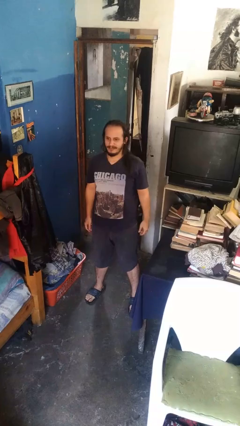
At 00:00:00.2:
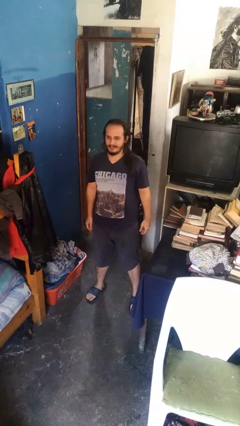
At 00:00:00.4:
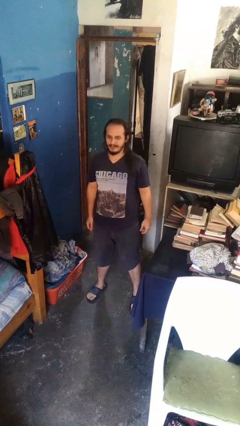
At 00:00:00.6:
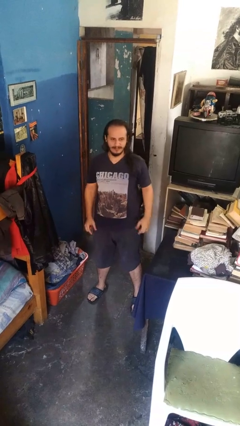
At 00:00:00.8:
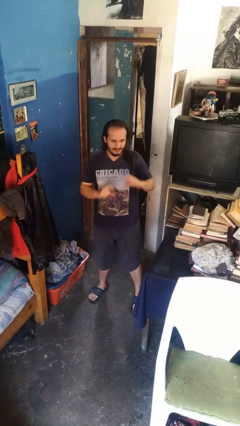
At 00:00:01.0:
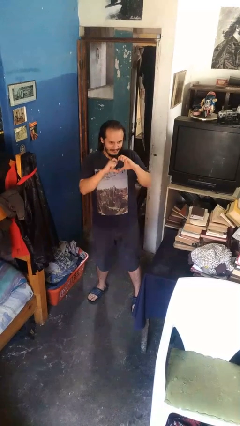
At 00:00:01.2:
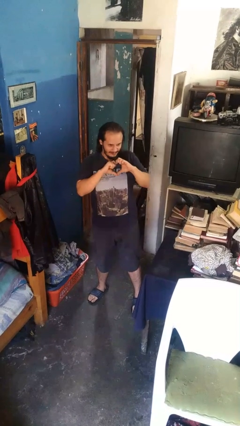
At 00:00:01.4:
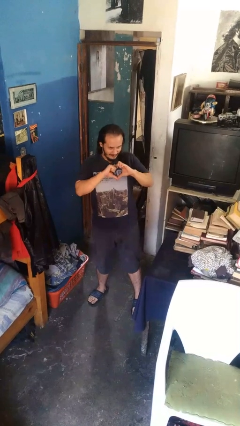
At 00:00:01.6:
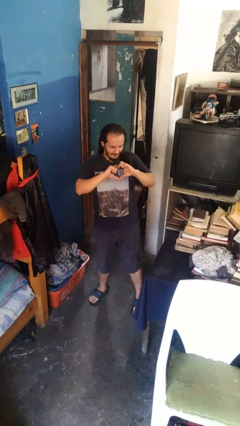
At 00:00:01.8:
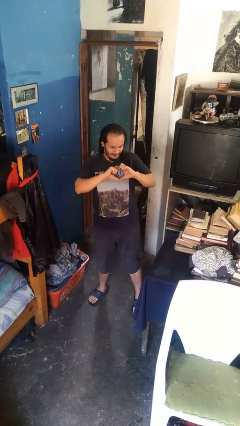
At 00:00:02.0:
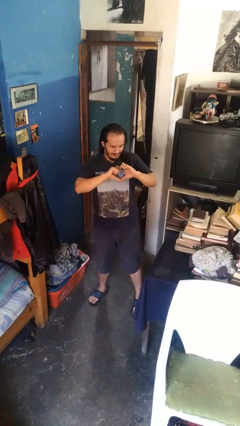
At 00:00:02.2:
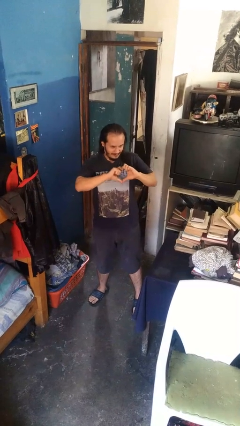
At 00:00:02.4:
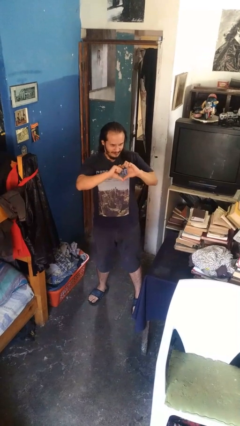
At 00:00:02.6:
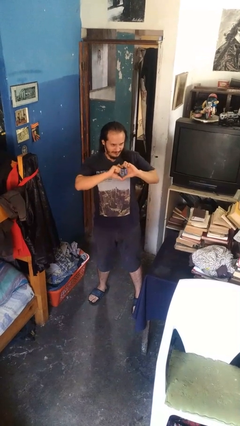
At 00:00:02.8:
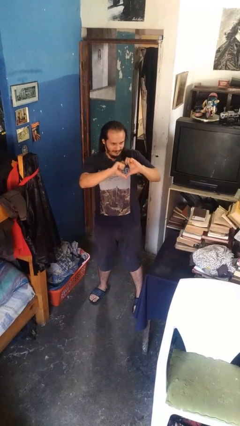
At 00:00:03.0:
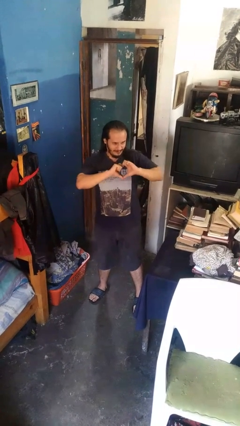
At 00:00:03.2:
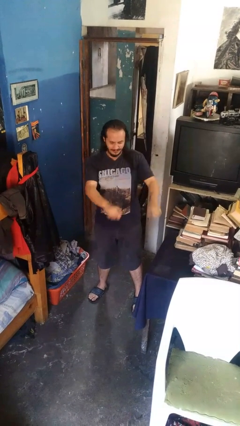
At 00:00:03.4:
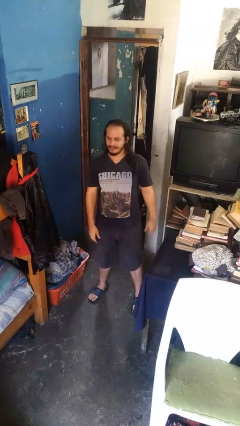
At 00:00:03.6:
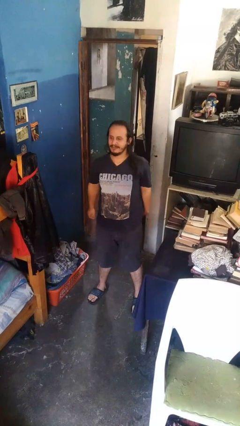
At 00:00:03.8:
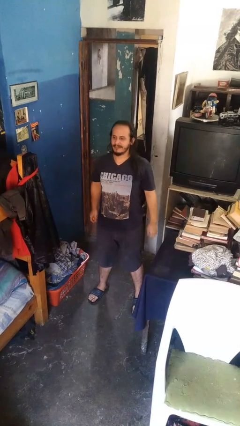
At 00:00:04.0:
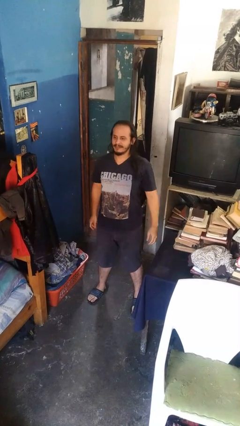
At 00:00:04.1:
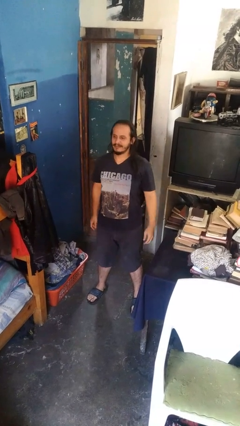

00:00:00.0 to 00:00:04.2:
person gestures heart

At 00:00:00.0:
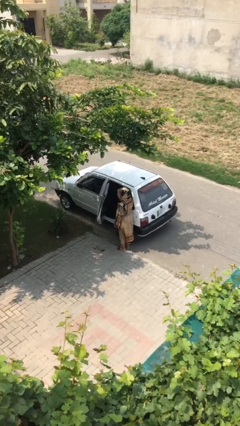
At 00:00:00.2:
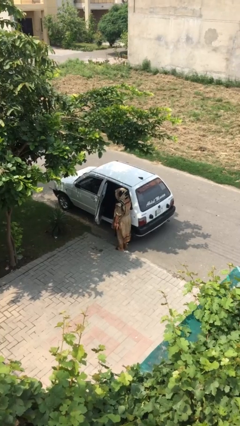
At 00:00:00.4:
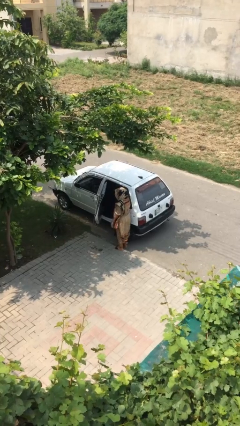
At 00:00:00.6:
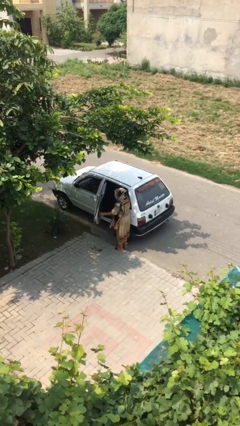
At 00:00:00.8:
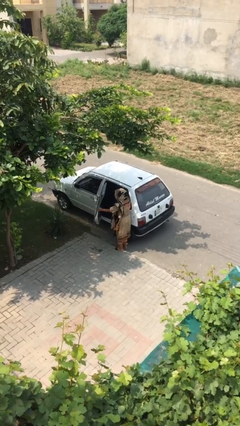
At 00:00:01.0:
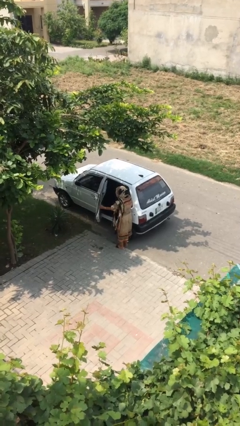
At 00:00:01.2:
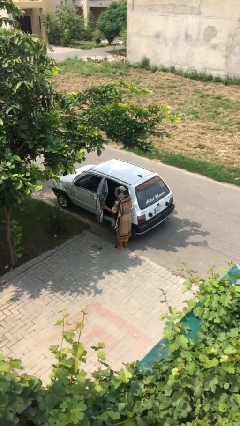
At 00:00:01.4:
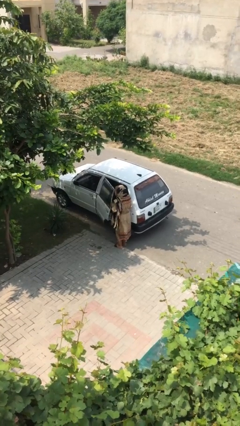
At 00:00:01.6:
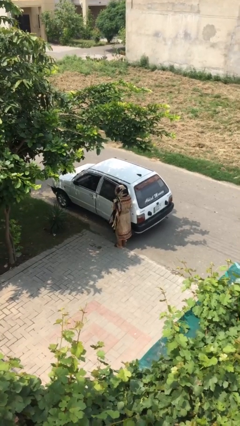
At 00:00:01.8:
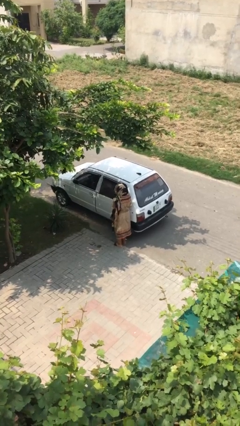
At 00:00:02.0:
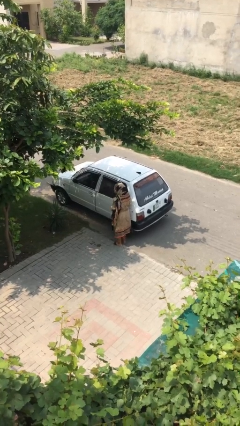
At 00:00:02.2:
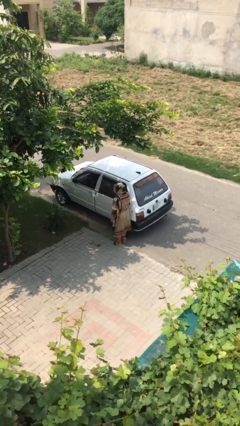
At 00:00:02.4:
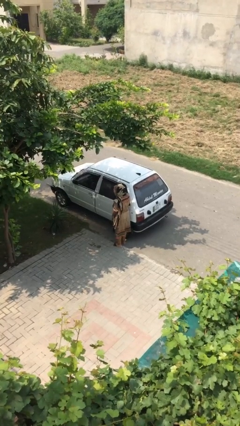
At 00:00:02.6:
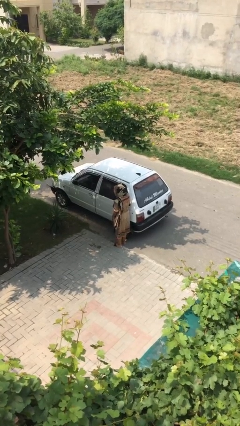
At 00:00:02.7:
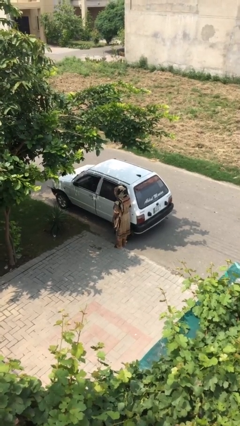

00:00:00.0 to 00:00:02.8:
person closes car door

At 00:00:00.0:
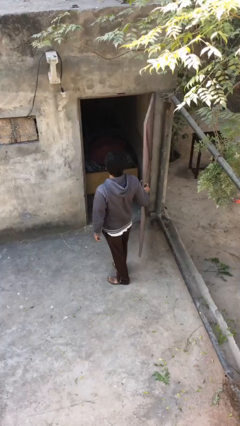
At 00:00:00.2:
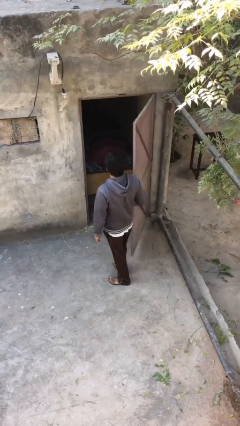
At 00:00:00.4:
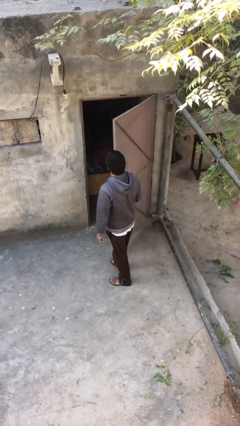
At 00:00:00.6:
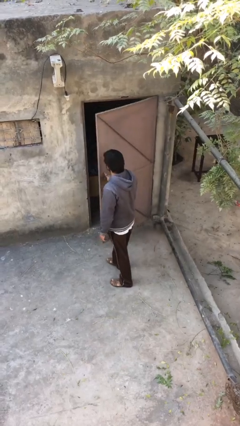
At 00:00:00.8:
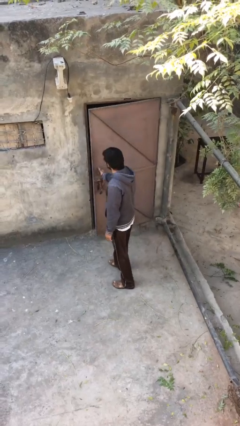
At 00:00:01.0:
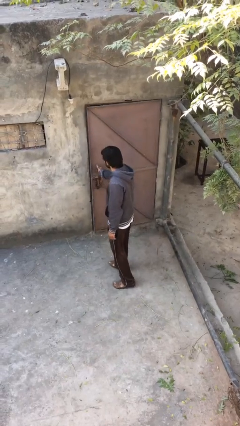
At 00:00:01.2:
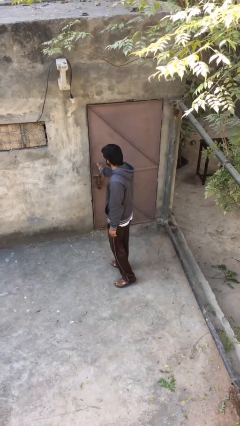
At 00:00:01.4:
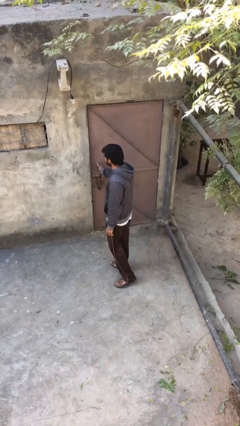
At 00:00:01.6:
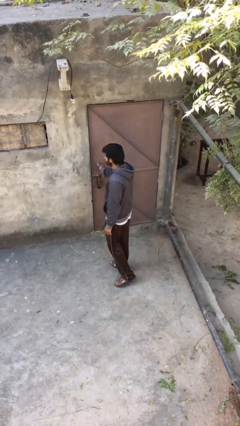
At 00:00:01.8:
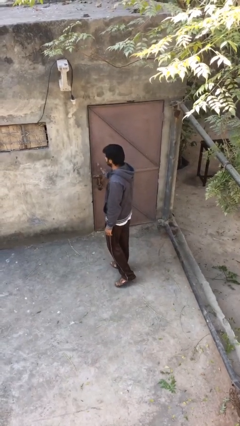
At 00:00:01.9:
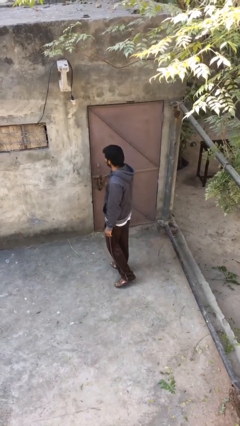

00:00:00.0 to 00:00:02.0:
person closes facility door

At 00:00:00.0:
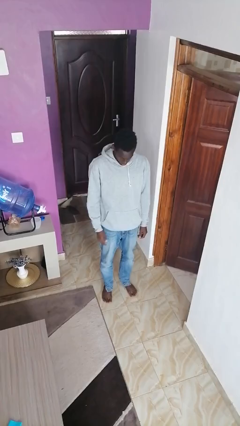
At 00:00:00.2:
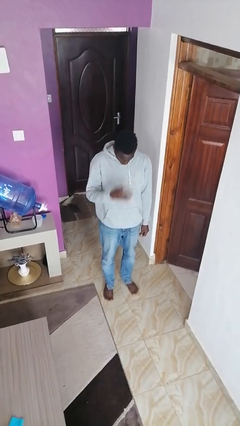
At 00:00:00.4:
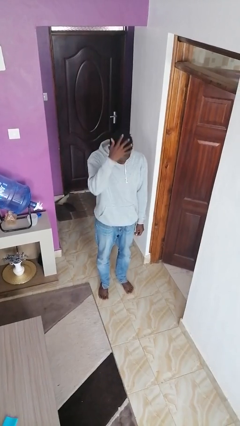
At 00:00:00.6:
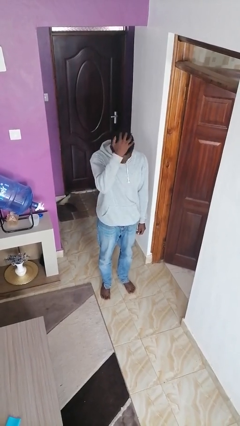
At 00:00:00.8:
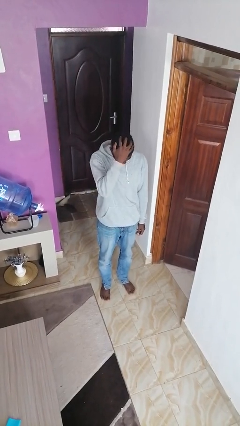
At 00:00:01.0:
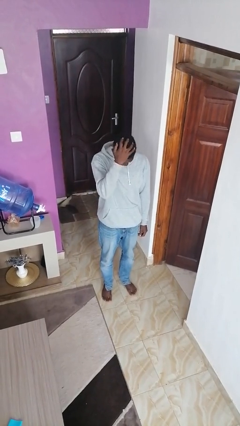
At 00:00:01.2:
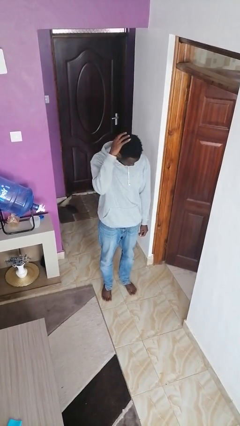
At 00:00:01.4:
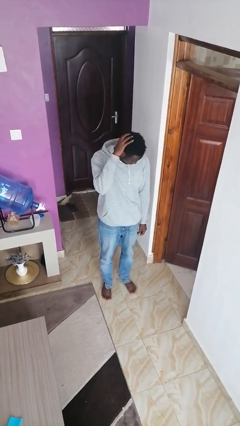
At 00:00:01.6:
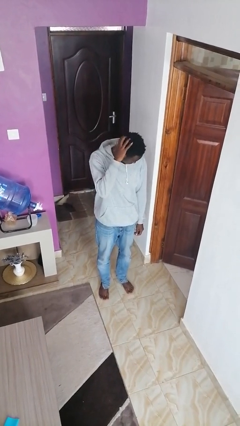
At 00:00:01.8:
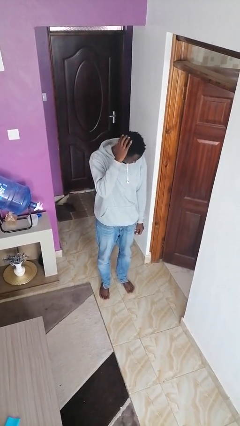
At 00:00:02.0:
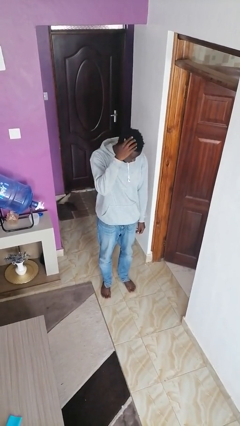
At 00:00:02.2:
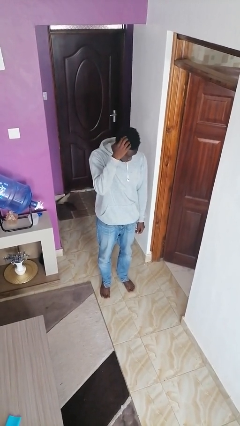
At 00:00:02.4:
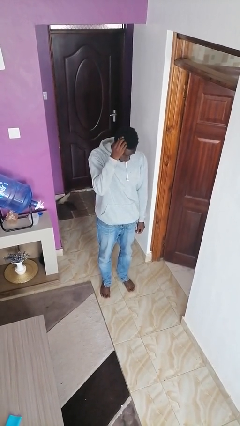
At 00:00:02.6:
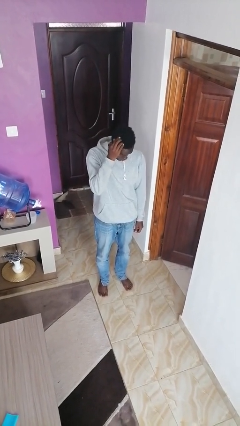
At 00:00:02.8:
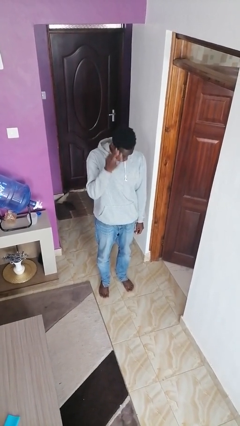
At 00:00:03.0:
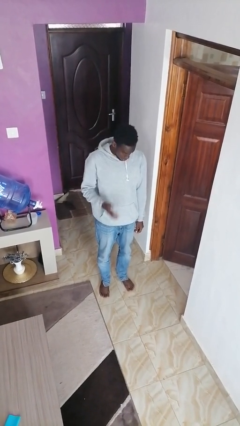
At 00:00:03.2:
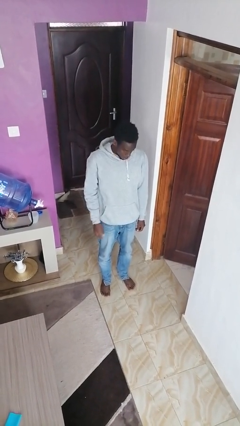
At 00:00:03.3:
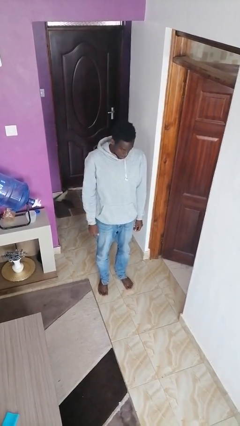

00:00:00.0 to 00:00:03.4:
person strokes hair

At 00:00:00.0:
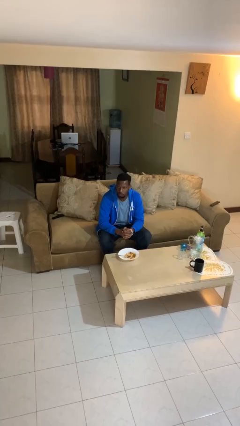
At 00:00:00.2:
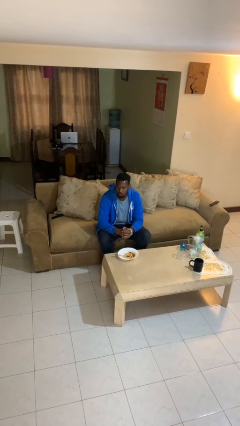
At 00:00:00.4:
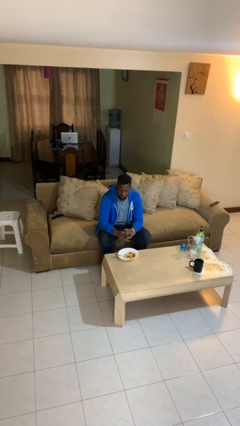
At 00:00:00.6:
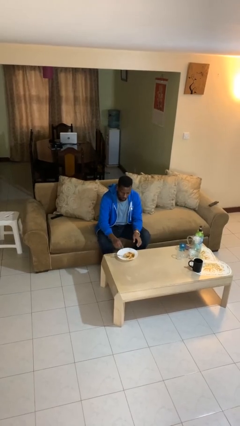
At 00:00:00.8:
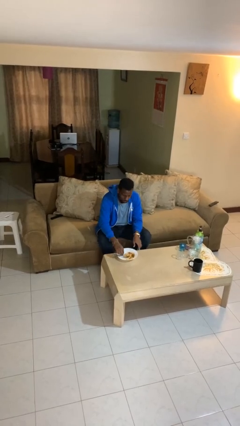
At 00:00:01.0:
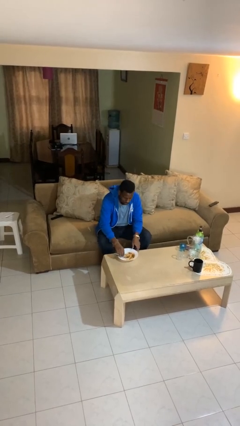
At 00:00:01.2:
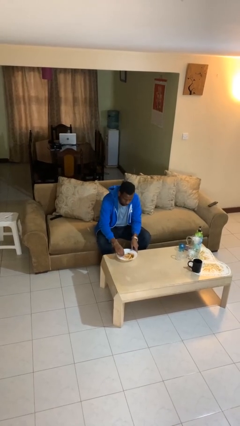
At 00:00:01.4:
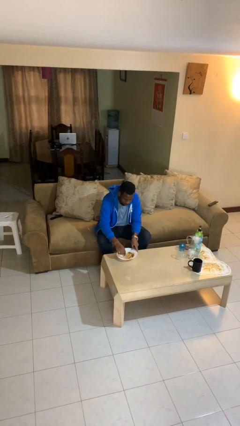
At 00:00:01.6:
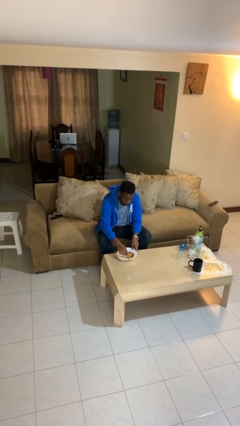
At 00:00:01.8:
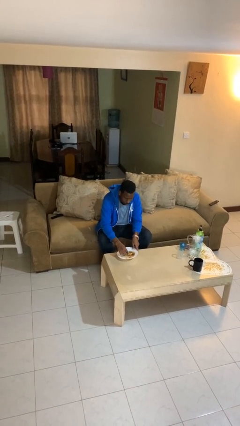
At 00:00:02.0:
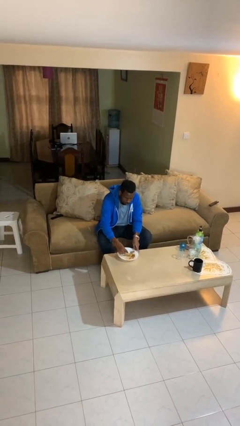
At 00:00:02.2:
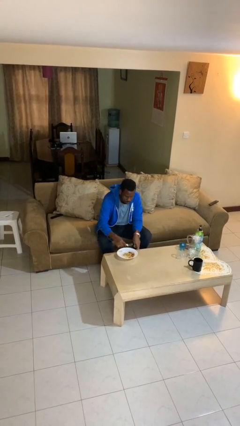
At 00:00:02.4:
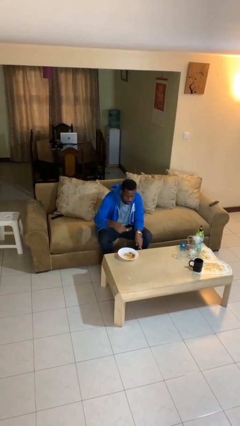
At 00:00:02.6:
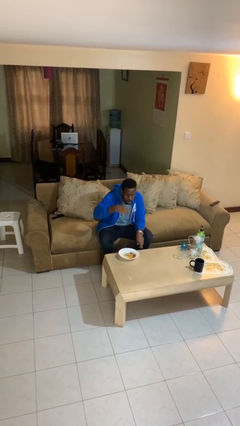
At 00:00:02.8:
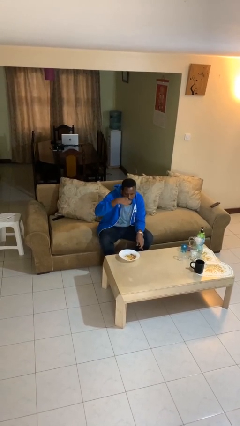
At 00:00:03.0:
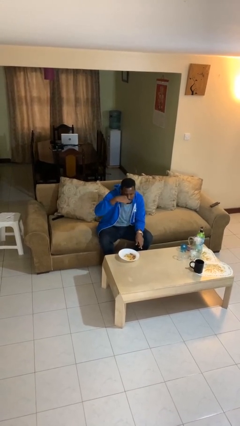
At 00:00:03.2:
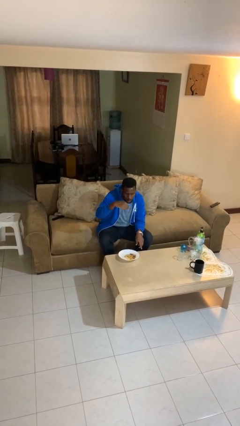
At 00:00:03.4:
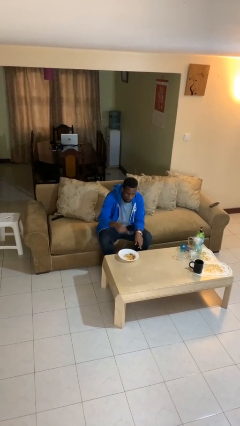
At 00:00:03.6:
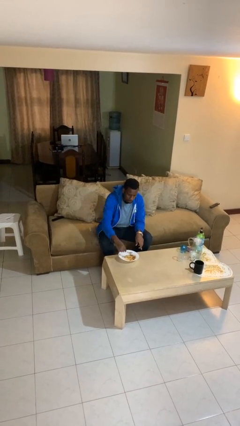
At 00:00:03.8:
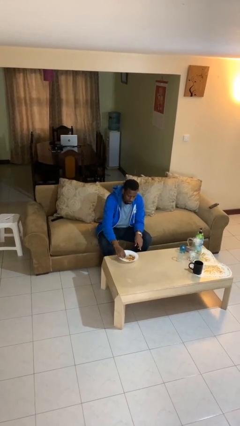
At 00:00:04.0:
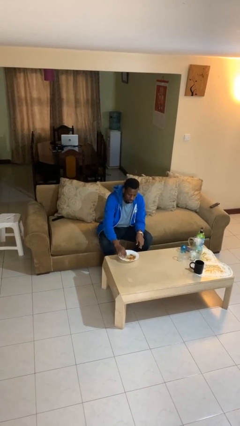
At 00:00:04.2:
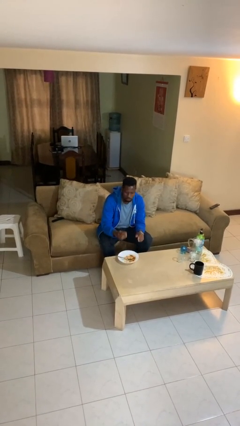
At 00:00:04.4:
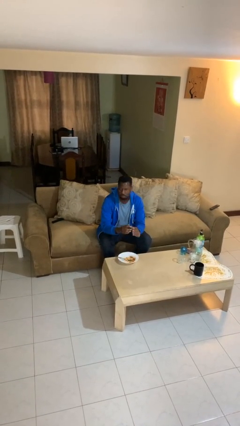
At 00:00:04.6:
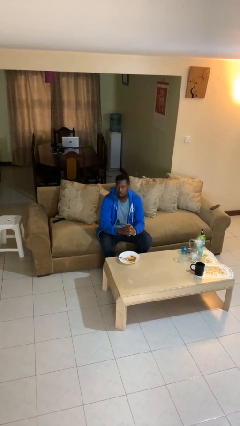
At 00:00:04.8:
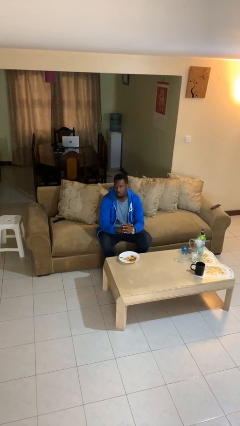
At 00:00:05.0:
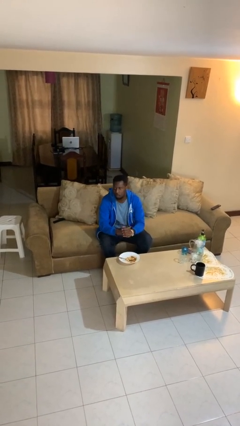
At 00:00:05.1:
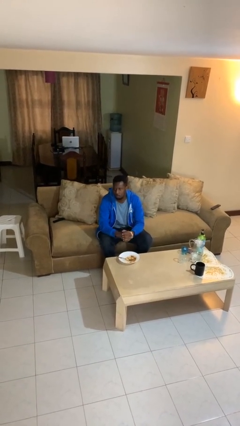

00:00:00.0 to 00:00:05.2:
person eats with utensil

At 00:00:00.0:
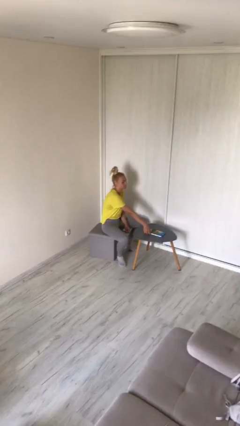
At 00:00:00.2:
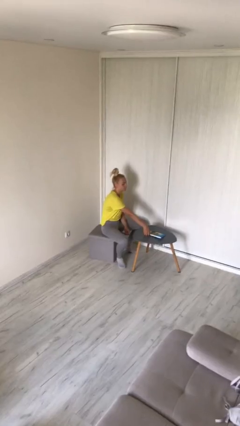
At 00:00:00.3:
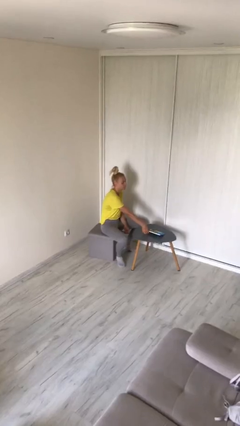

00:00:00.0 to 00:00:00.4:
person picks up object from table
